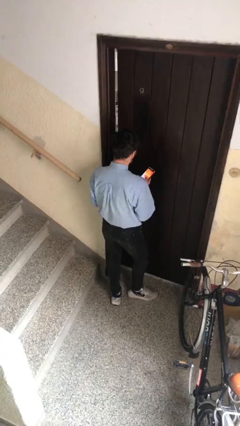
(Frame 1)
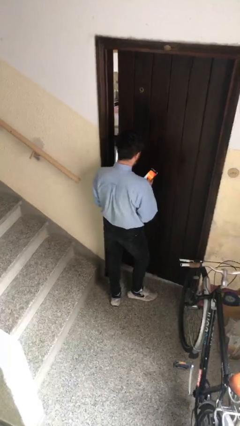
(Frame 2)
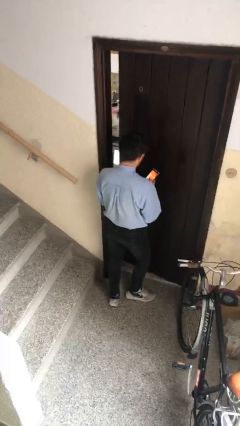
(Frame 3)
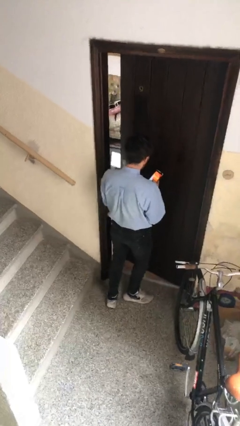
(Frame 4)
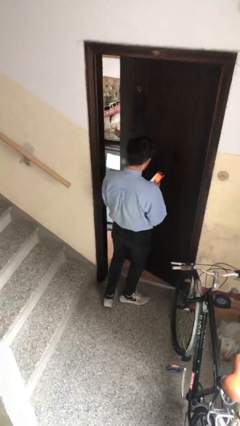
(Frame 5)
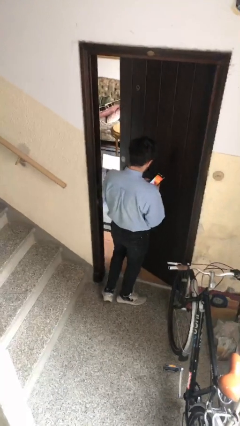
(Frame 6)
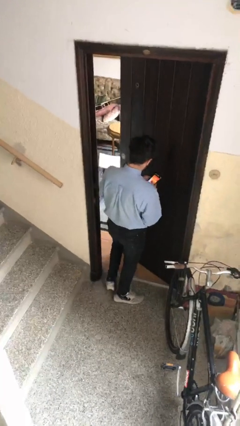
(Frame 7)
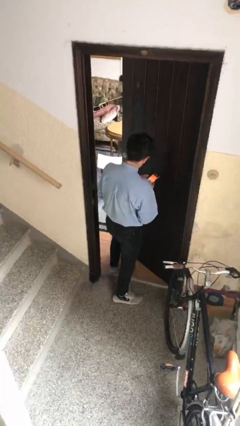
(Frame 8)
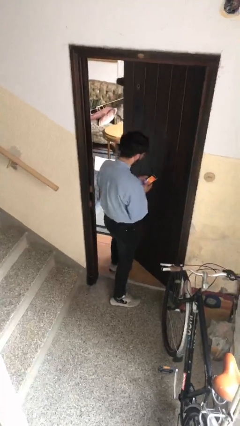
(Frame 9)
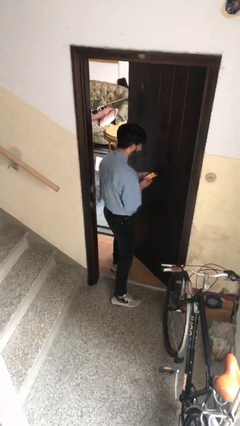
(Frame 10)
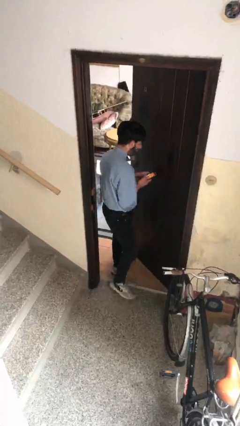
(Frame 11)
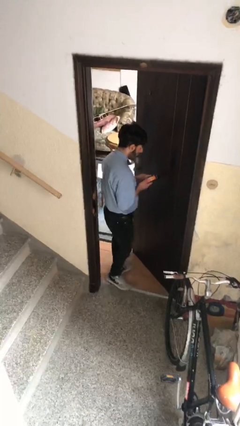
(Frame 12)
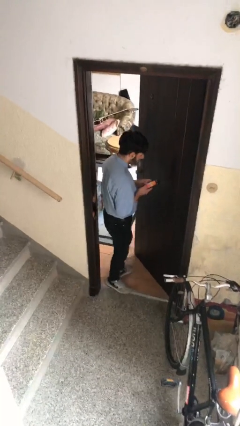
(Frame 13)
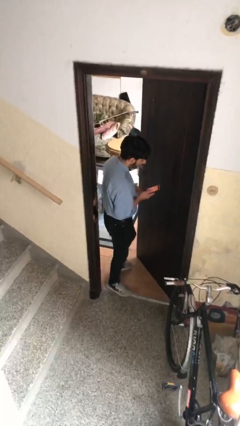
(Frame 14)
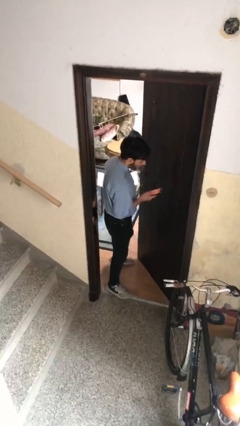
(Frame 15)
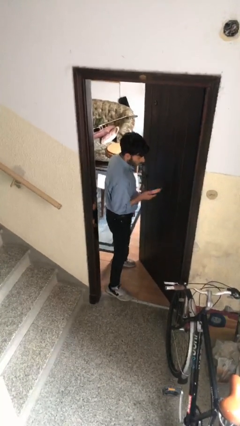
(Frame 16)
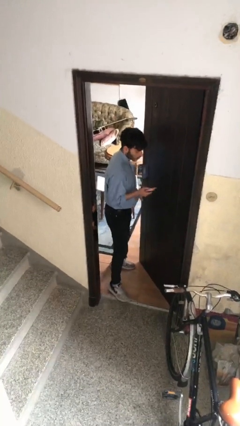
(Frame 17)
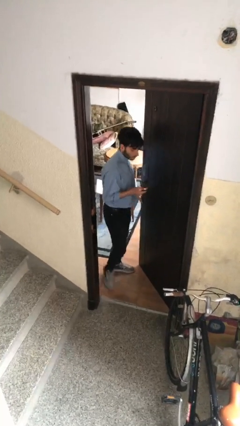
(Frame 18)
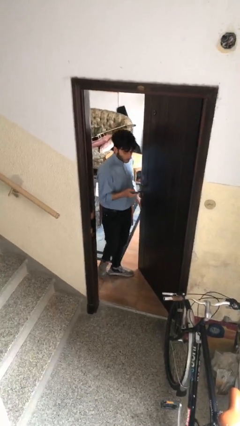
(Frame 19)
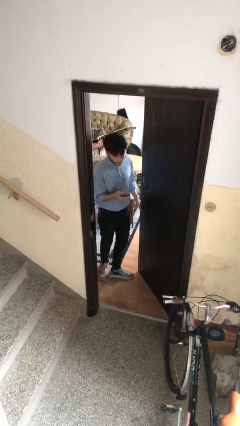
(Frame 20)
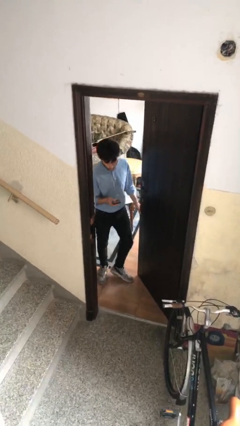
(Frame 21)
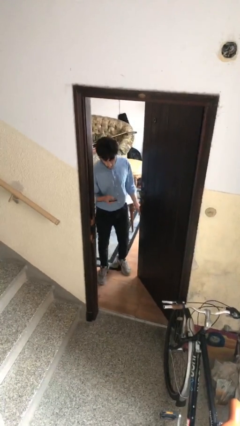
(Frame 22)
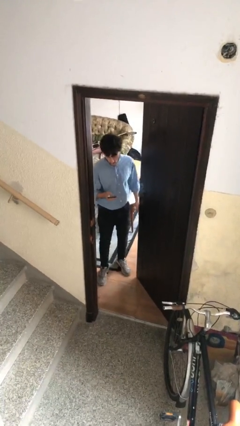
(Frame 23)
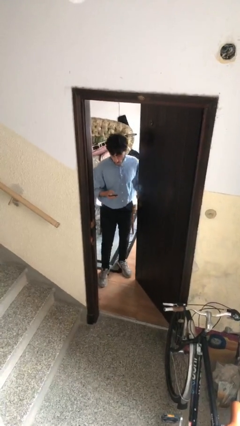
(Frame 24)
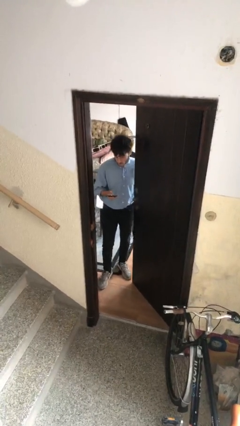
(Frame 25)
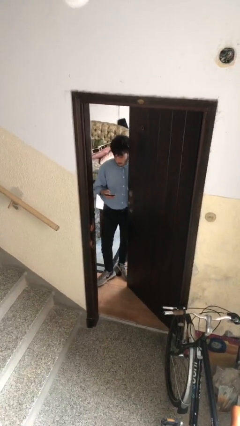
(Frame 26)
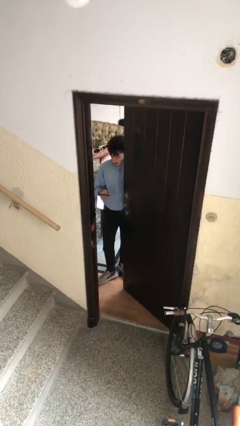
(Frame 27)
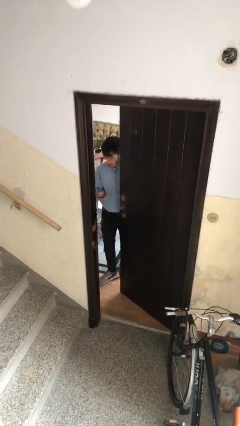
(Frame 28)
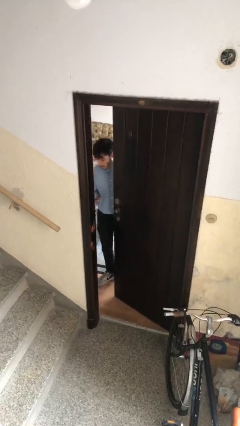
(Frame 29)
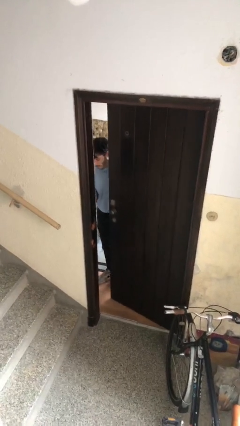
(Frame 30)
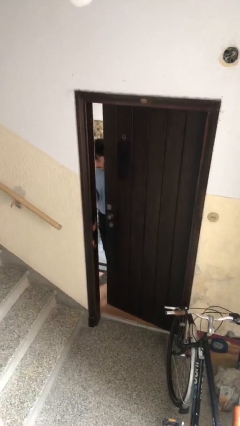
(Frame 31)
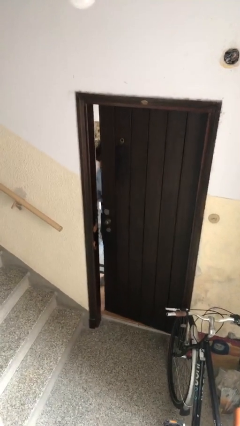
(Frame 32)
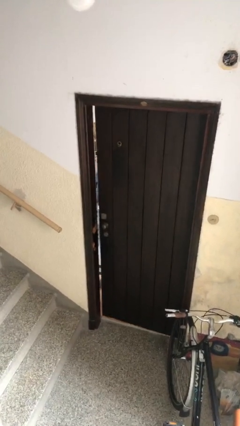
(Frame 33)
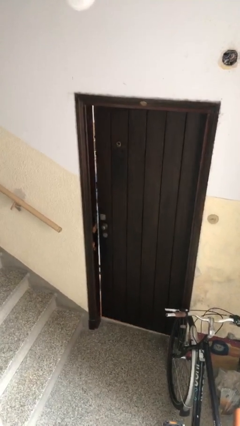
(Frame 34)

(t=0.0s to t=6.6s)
person texts on phone

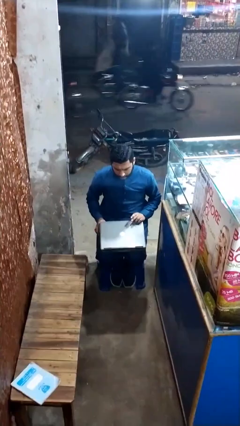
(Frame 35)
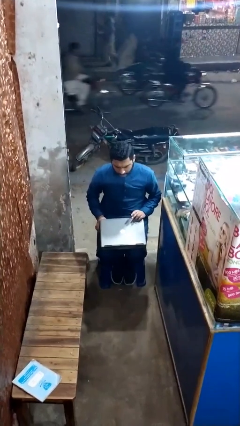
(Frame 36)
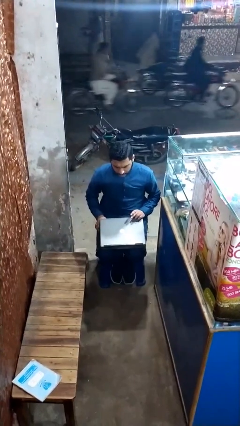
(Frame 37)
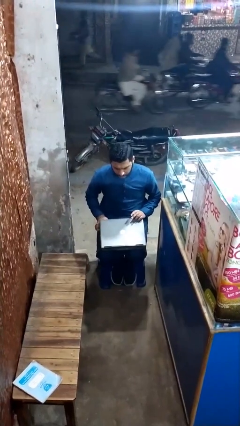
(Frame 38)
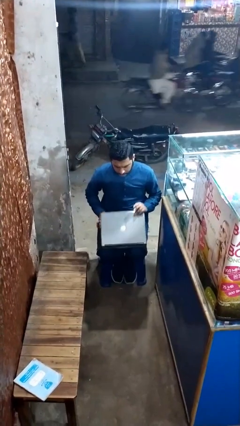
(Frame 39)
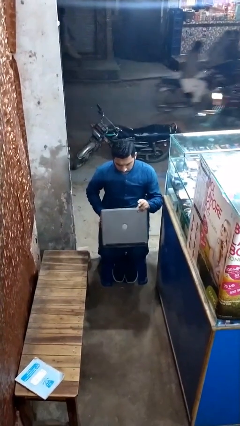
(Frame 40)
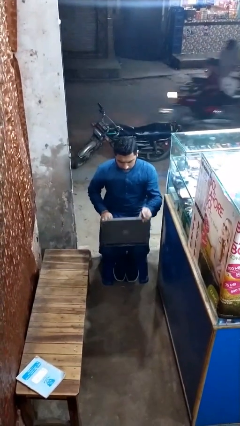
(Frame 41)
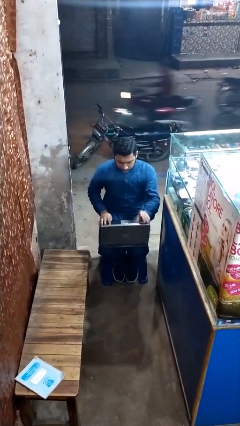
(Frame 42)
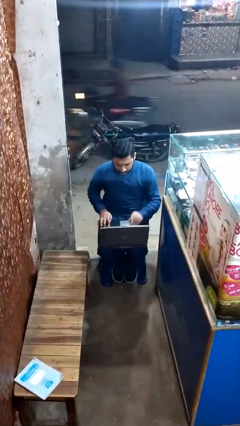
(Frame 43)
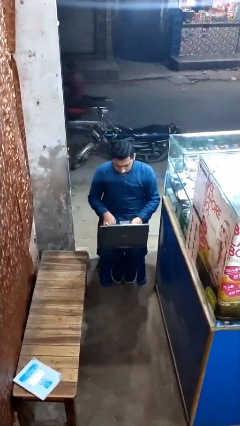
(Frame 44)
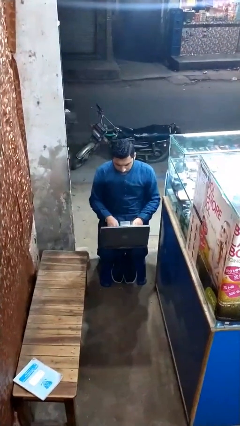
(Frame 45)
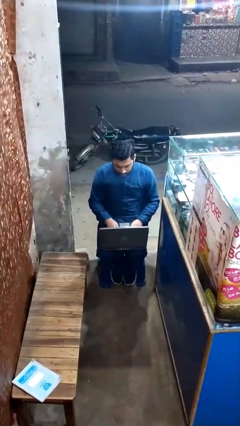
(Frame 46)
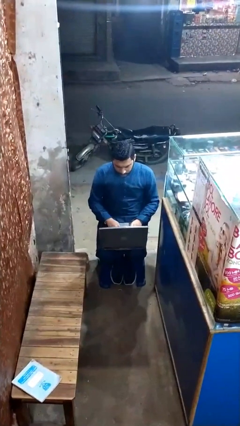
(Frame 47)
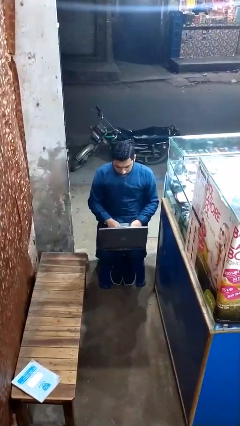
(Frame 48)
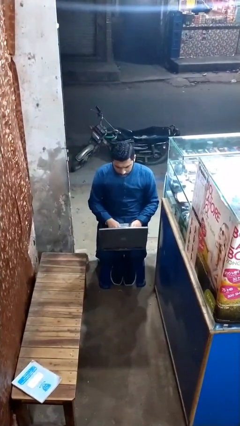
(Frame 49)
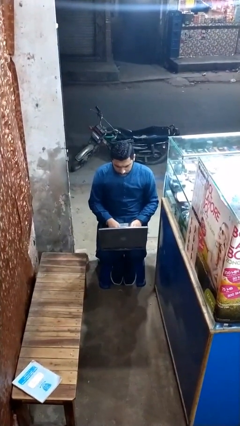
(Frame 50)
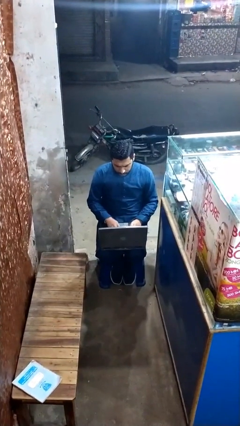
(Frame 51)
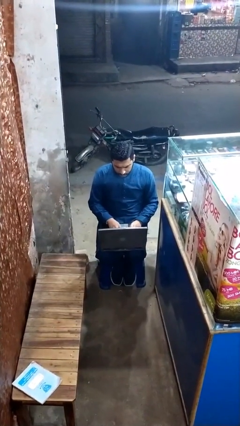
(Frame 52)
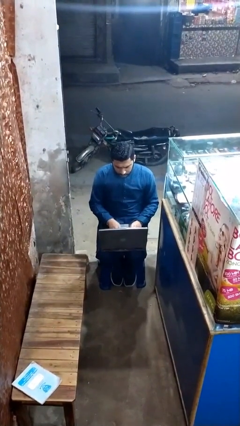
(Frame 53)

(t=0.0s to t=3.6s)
person interacts with laptop

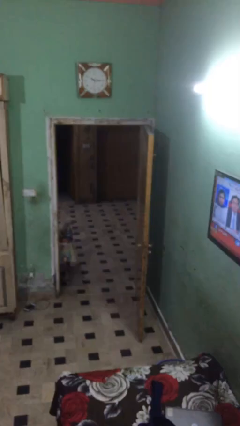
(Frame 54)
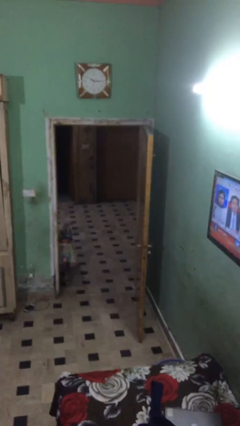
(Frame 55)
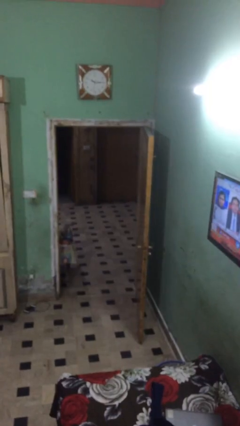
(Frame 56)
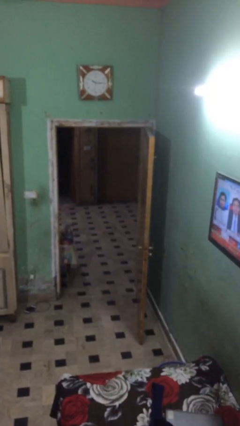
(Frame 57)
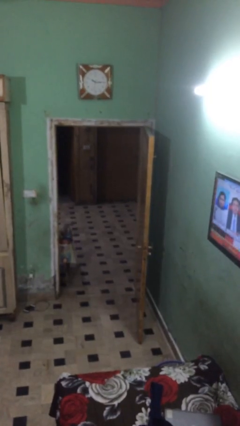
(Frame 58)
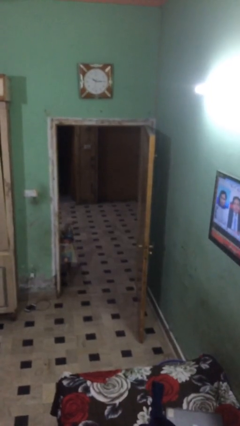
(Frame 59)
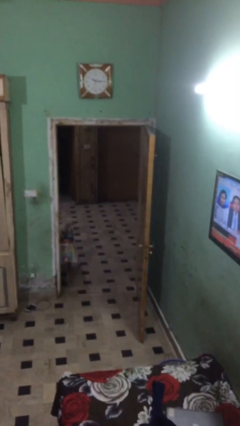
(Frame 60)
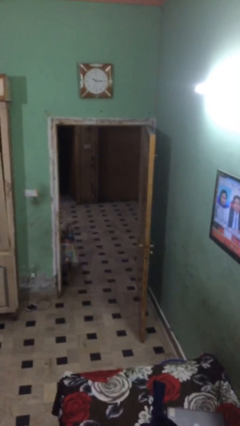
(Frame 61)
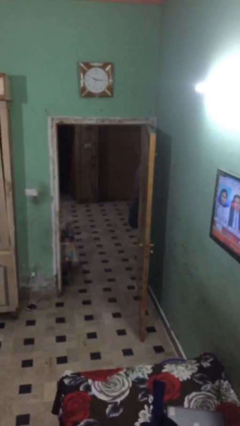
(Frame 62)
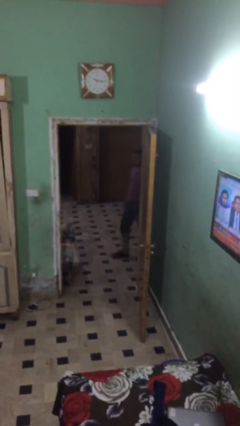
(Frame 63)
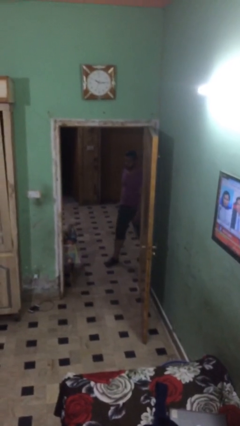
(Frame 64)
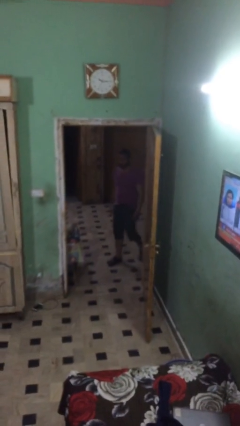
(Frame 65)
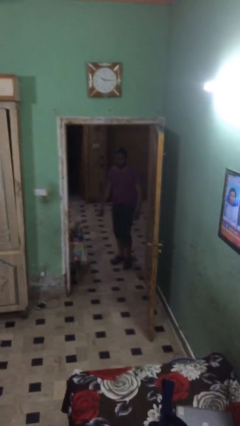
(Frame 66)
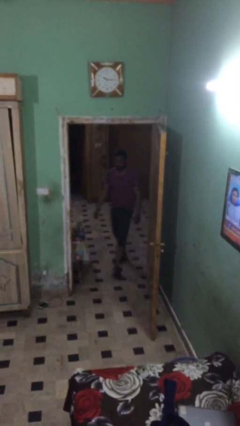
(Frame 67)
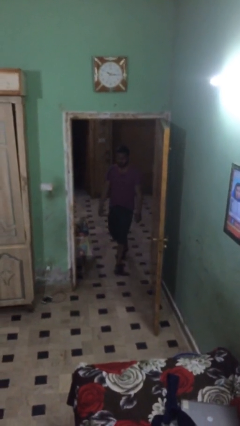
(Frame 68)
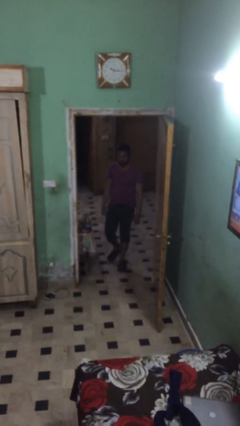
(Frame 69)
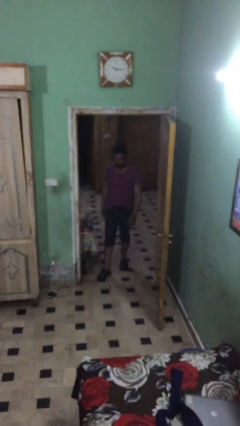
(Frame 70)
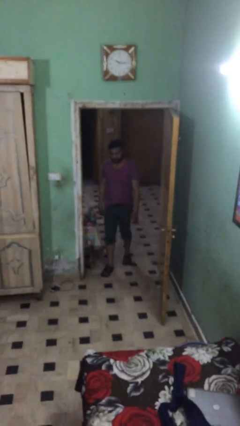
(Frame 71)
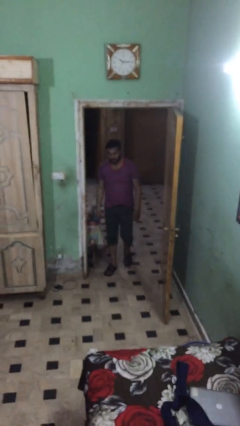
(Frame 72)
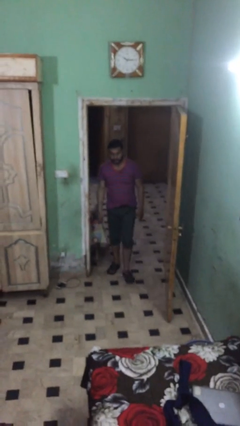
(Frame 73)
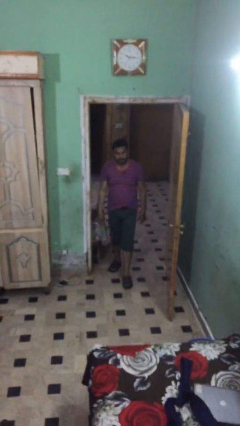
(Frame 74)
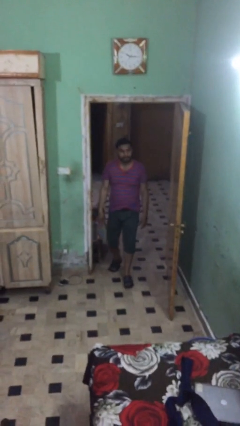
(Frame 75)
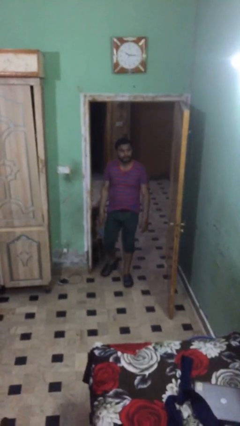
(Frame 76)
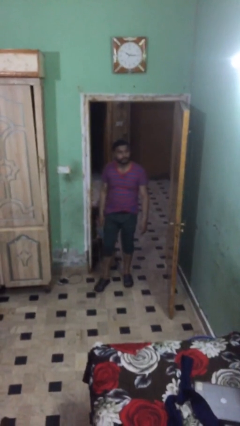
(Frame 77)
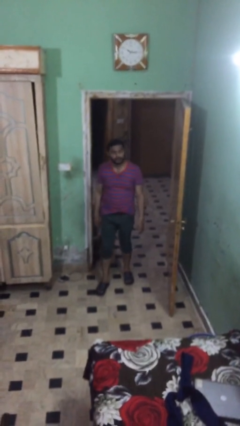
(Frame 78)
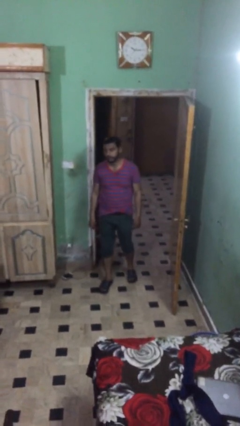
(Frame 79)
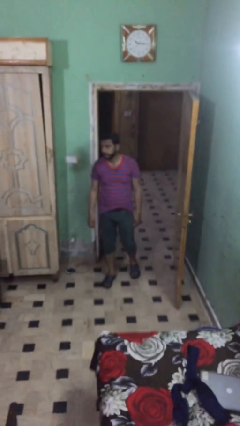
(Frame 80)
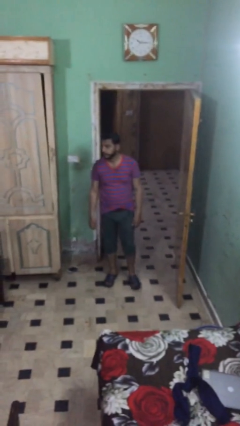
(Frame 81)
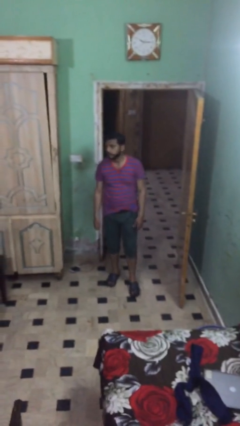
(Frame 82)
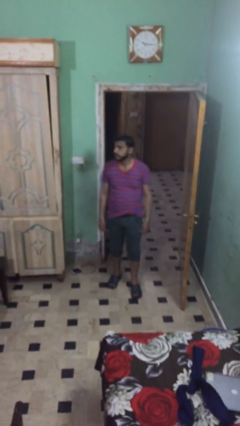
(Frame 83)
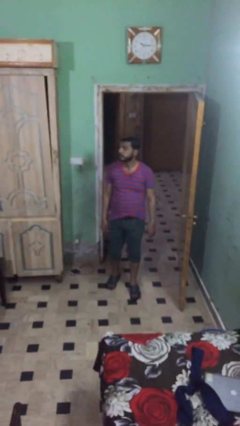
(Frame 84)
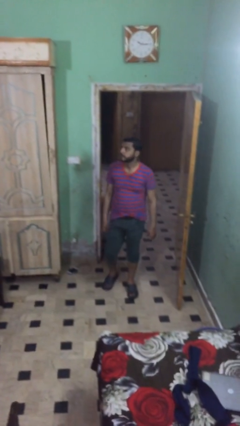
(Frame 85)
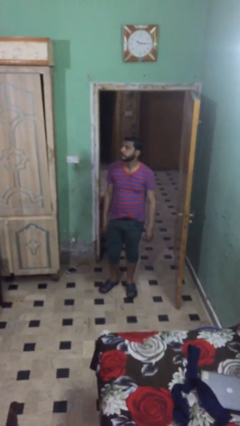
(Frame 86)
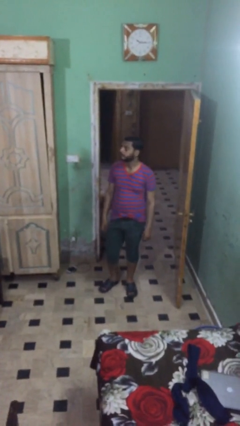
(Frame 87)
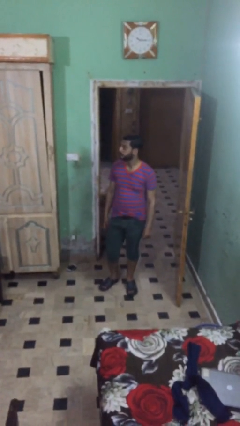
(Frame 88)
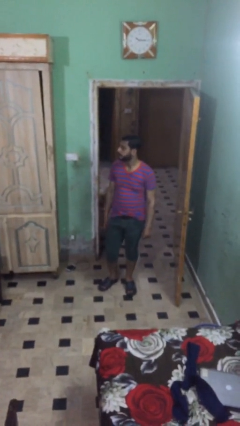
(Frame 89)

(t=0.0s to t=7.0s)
person enters scene through structure

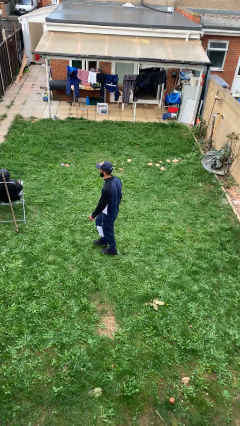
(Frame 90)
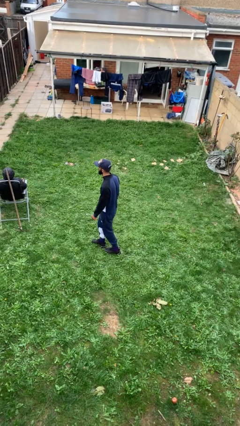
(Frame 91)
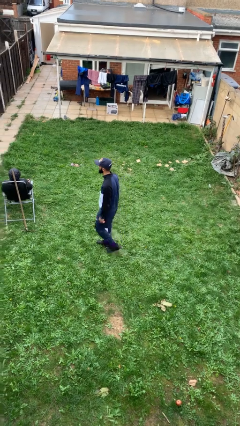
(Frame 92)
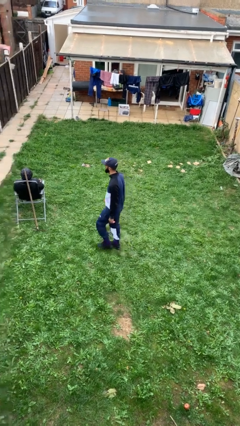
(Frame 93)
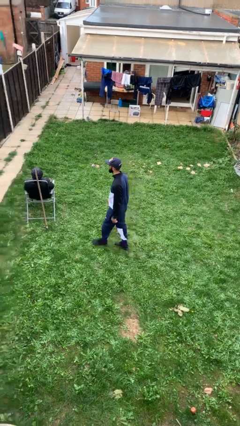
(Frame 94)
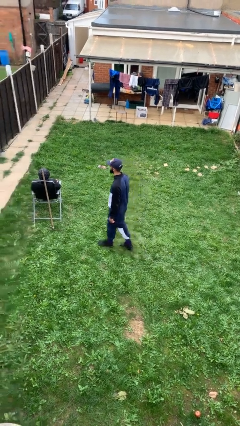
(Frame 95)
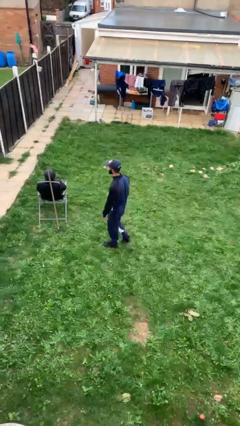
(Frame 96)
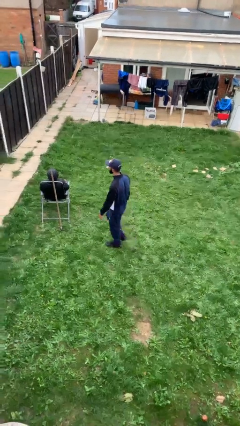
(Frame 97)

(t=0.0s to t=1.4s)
person steals object from person
